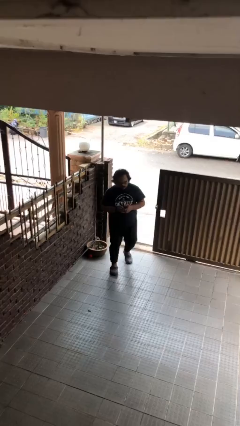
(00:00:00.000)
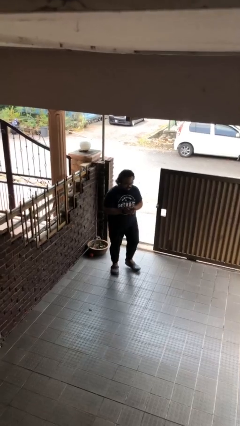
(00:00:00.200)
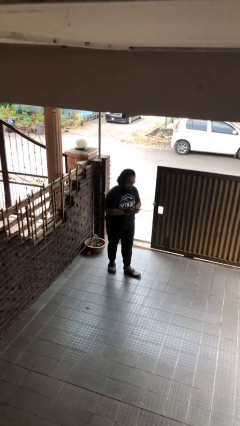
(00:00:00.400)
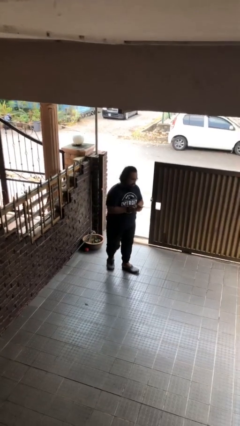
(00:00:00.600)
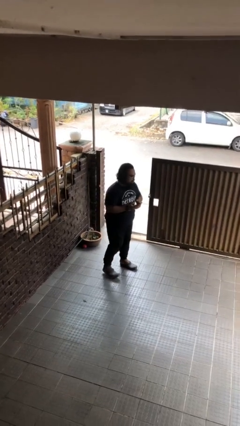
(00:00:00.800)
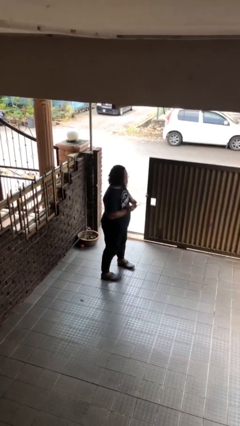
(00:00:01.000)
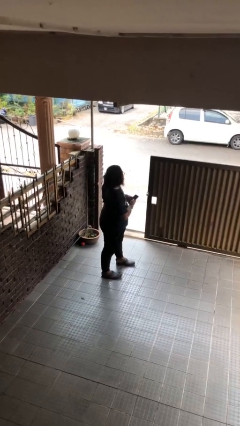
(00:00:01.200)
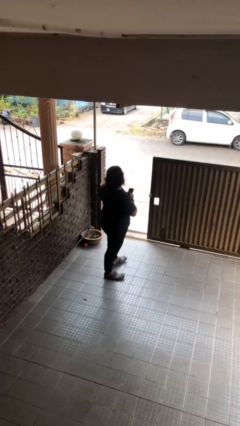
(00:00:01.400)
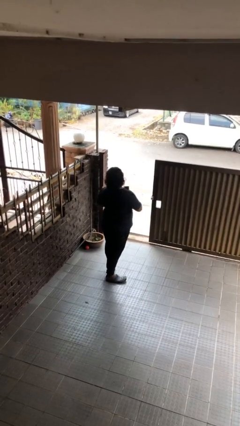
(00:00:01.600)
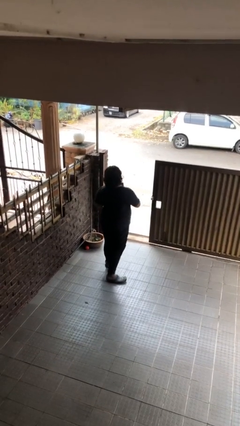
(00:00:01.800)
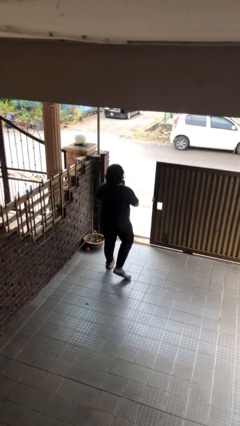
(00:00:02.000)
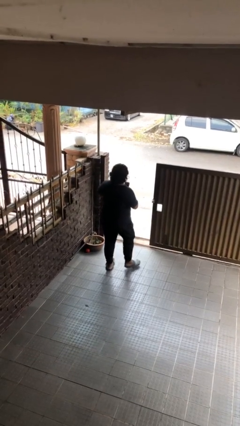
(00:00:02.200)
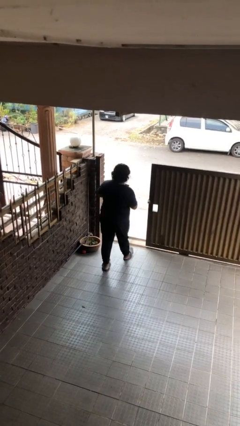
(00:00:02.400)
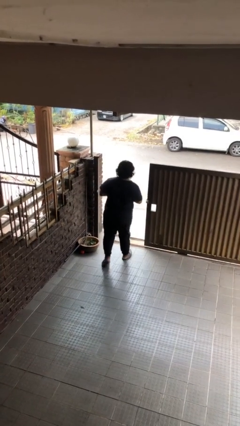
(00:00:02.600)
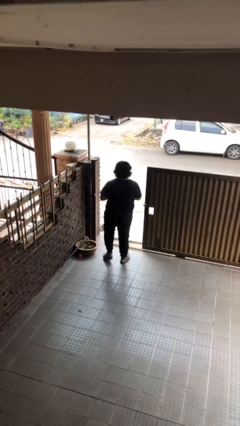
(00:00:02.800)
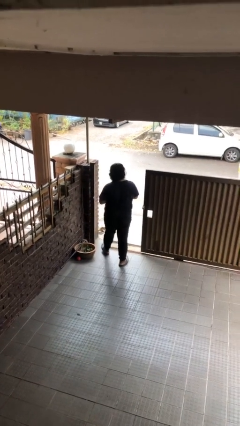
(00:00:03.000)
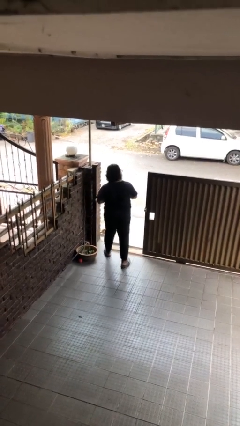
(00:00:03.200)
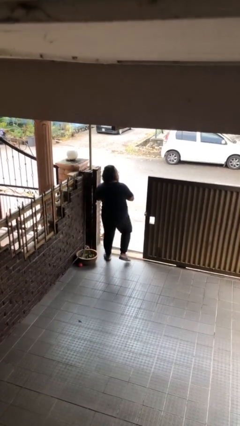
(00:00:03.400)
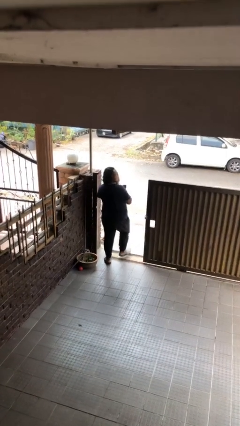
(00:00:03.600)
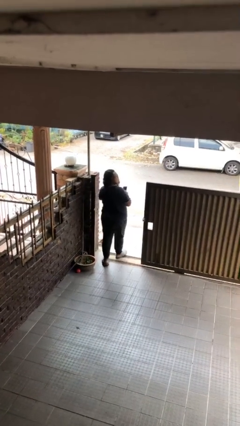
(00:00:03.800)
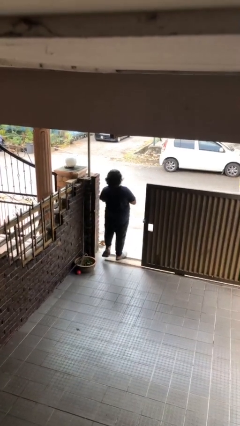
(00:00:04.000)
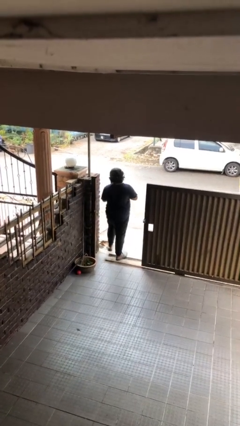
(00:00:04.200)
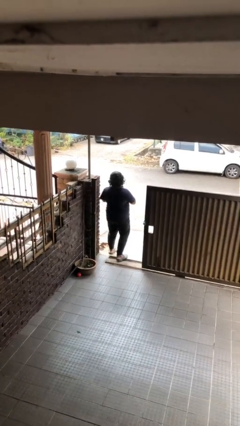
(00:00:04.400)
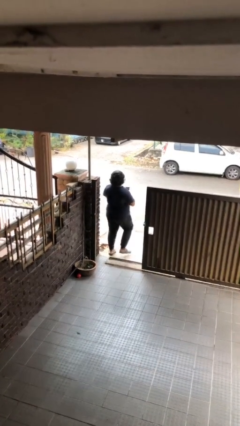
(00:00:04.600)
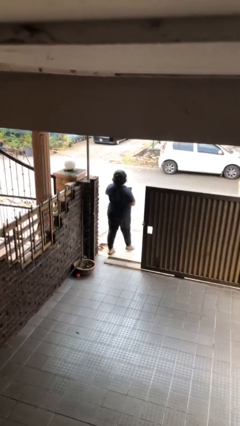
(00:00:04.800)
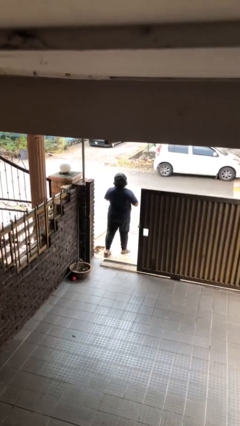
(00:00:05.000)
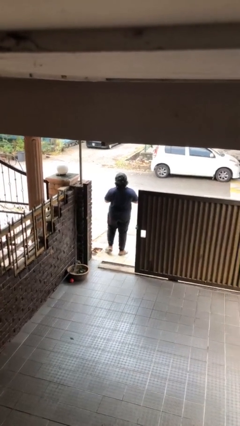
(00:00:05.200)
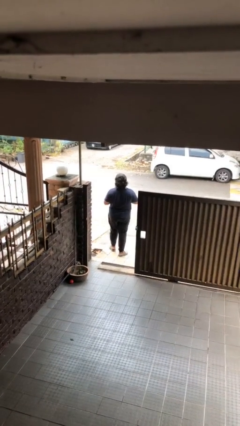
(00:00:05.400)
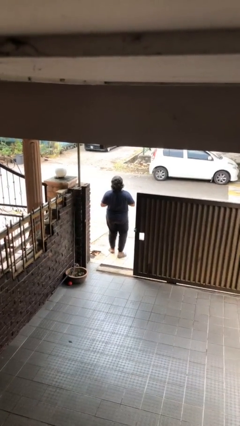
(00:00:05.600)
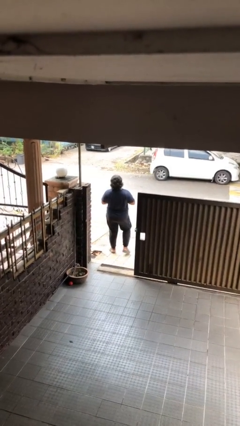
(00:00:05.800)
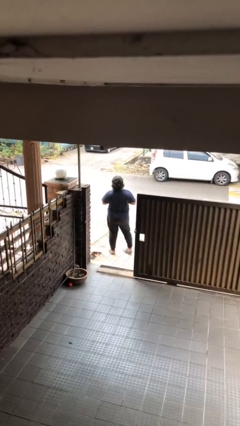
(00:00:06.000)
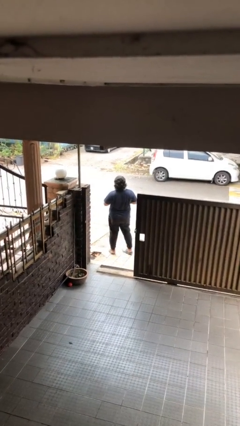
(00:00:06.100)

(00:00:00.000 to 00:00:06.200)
person exits scene through structure

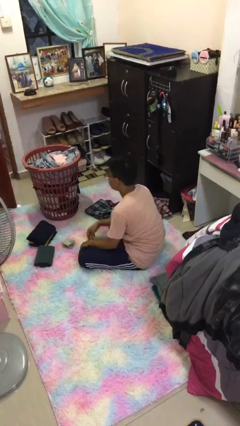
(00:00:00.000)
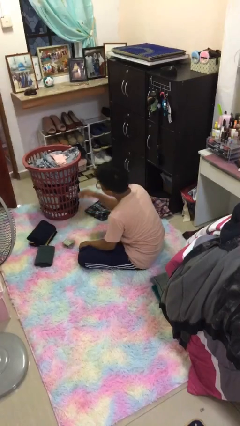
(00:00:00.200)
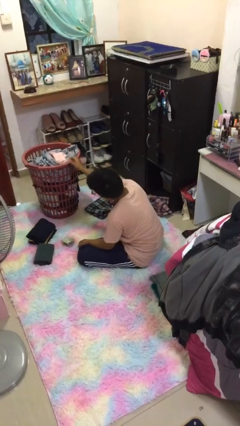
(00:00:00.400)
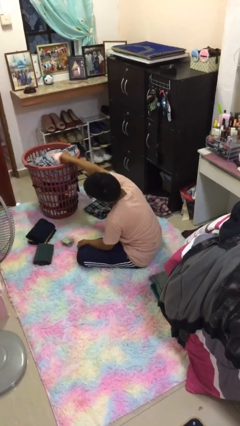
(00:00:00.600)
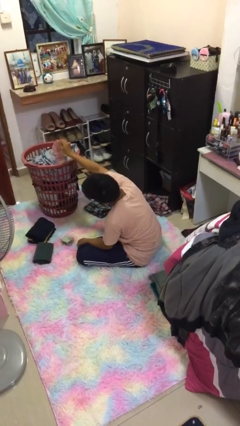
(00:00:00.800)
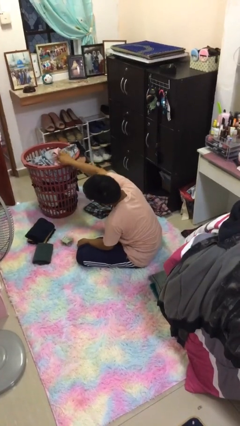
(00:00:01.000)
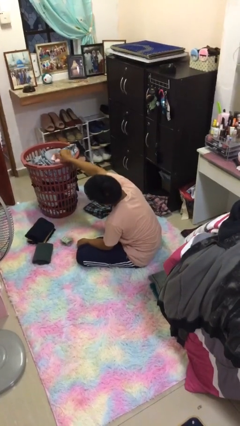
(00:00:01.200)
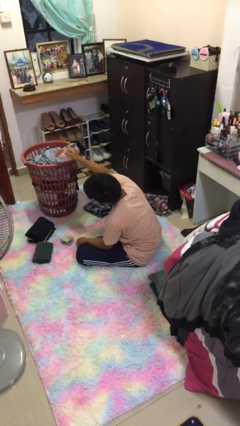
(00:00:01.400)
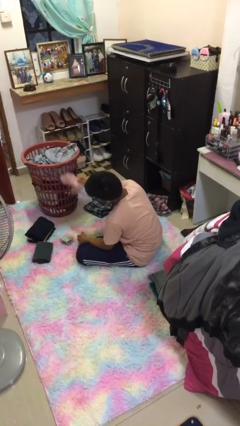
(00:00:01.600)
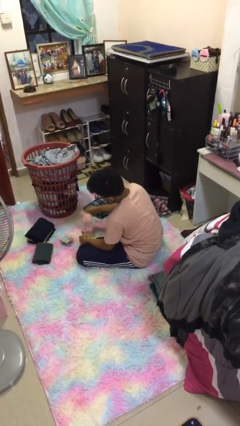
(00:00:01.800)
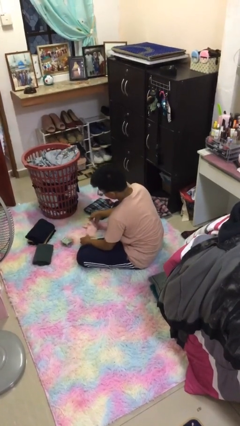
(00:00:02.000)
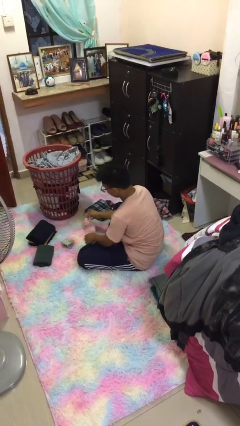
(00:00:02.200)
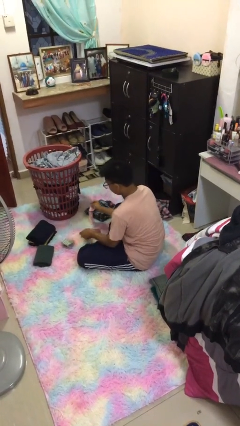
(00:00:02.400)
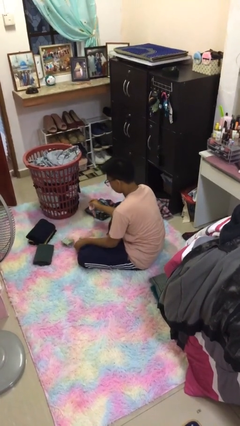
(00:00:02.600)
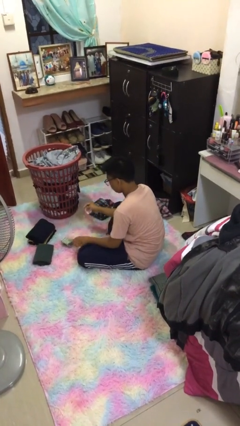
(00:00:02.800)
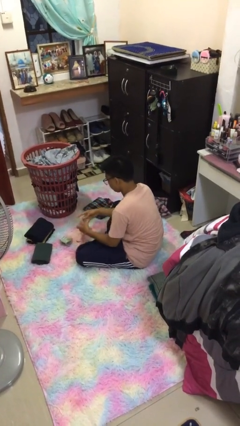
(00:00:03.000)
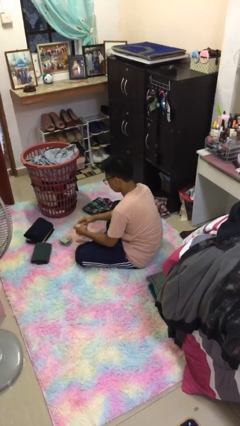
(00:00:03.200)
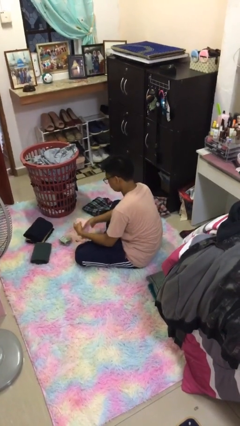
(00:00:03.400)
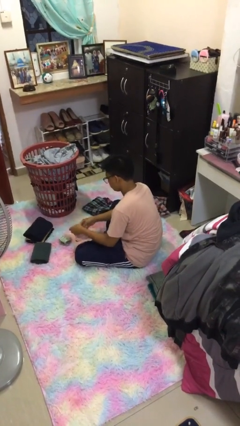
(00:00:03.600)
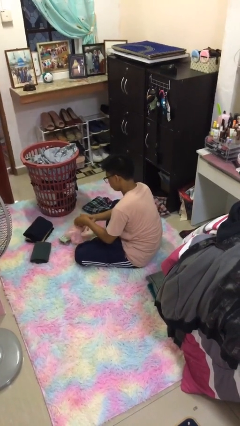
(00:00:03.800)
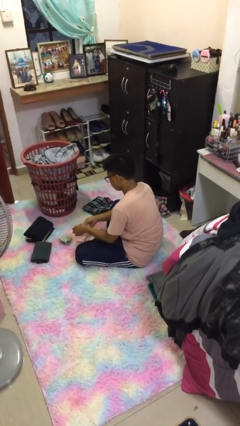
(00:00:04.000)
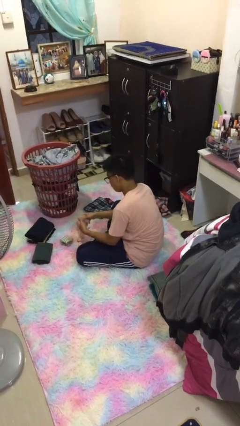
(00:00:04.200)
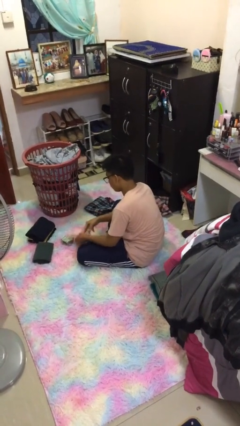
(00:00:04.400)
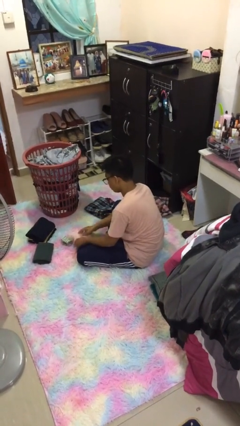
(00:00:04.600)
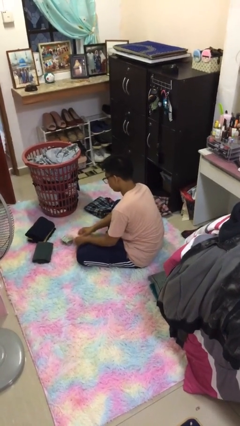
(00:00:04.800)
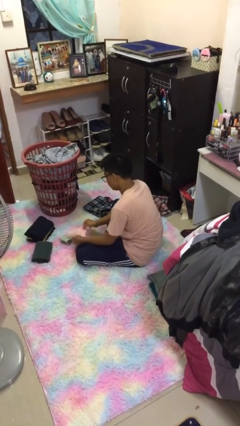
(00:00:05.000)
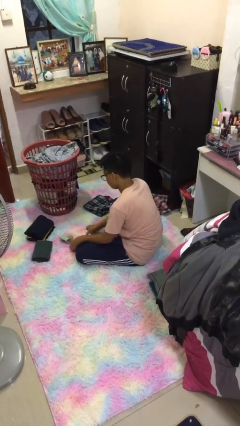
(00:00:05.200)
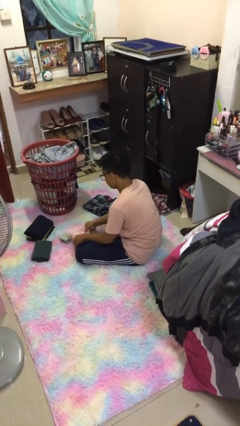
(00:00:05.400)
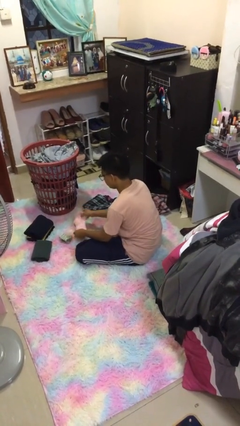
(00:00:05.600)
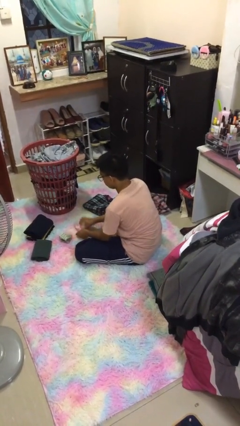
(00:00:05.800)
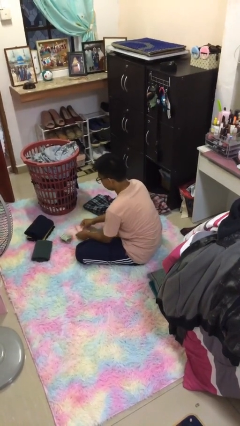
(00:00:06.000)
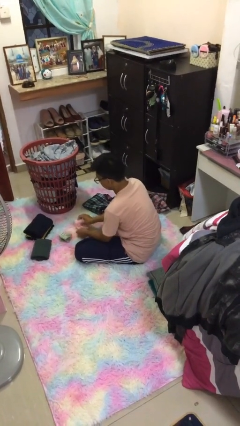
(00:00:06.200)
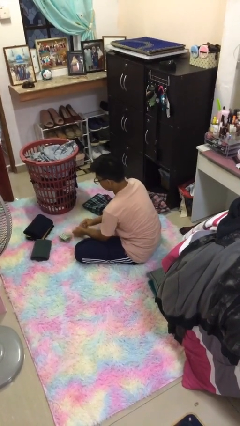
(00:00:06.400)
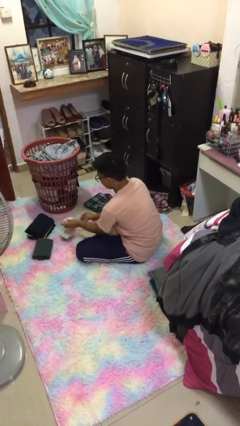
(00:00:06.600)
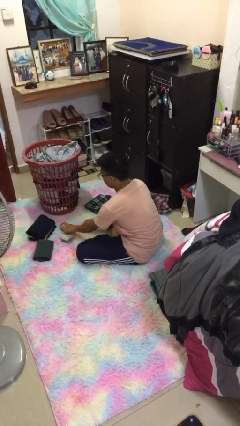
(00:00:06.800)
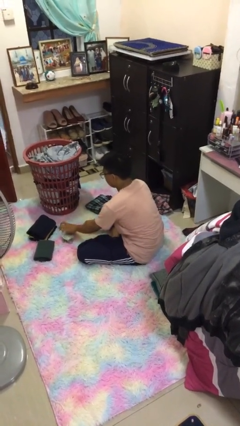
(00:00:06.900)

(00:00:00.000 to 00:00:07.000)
person folds socks

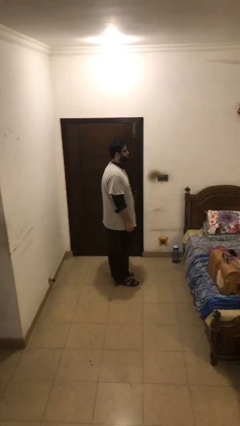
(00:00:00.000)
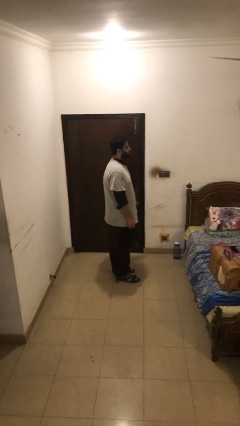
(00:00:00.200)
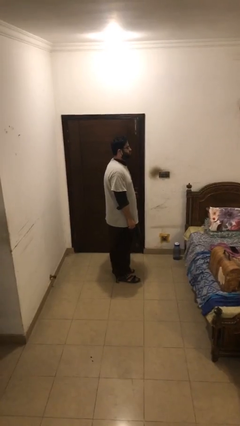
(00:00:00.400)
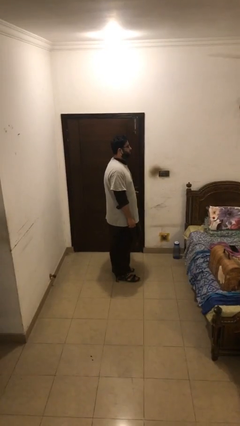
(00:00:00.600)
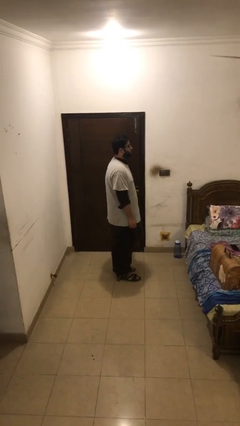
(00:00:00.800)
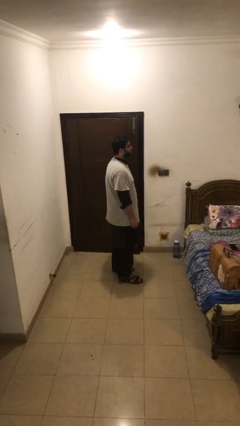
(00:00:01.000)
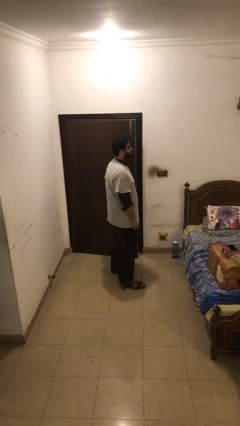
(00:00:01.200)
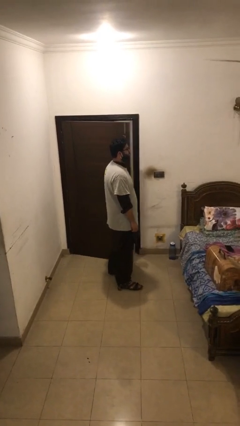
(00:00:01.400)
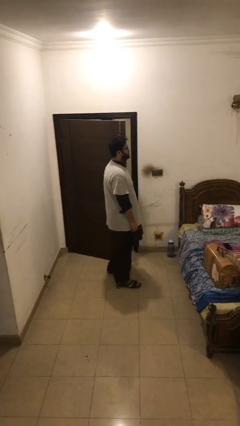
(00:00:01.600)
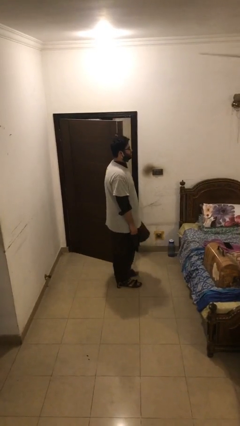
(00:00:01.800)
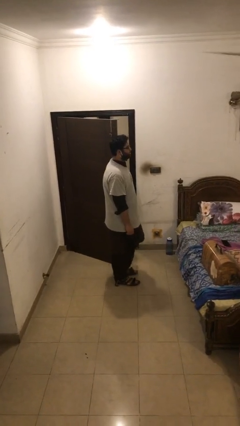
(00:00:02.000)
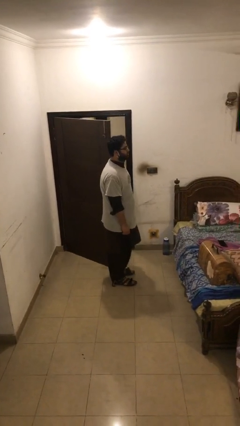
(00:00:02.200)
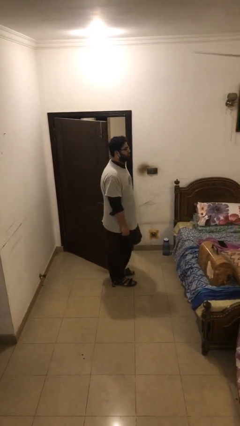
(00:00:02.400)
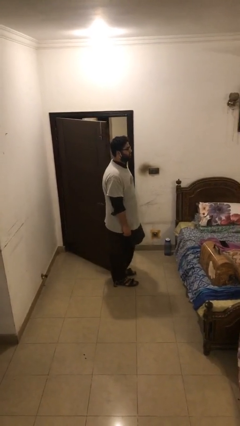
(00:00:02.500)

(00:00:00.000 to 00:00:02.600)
person opens facility door

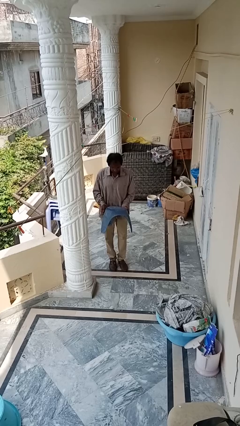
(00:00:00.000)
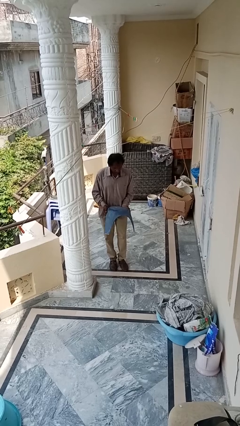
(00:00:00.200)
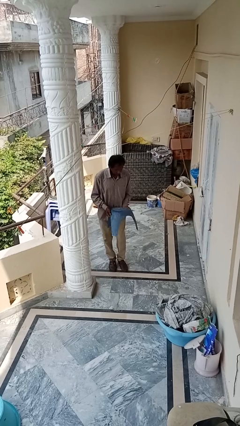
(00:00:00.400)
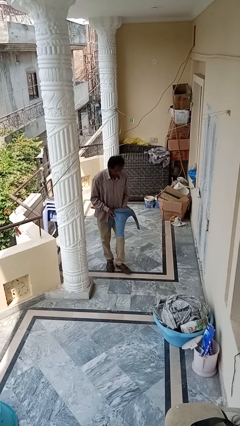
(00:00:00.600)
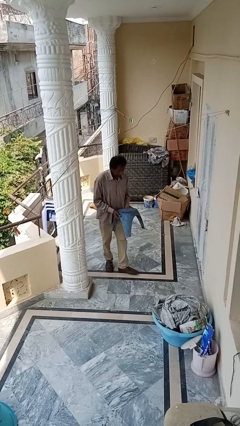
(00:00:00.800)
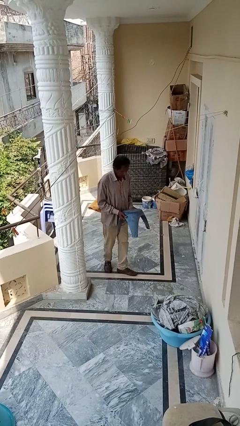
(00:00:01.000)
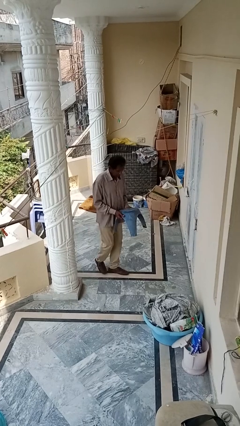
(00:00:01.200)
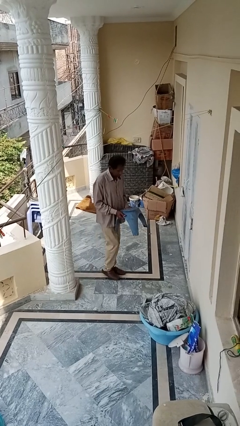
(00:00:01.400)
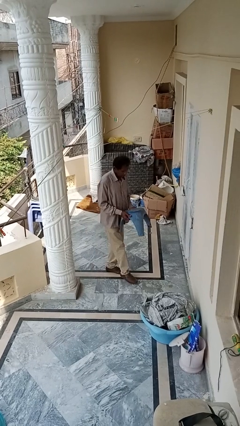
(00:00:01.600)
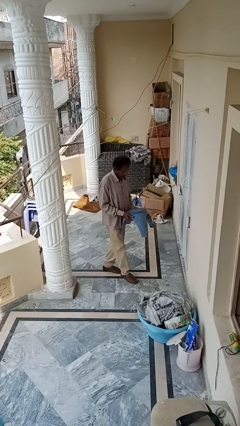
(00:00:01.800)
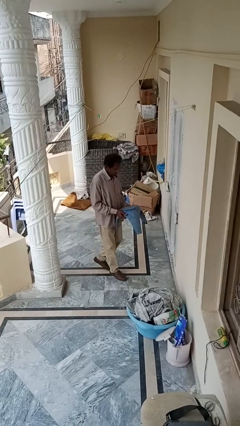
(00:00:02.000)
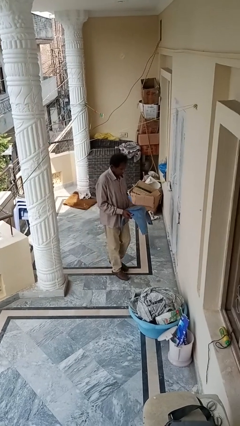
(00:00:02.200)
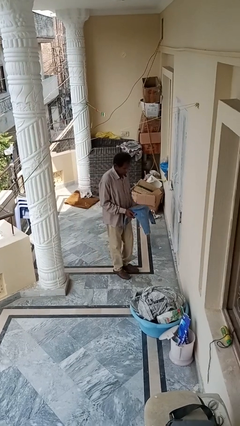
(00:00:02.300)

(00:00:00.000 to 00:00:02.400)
person carries furniture
